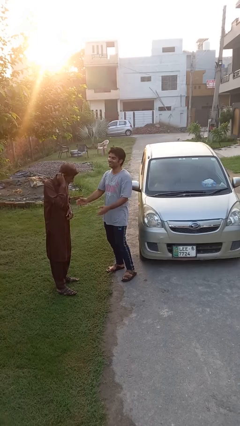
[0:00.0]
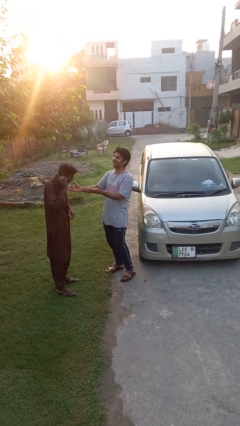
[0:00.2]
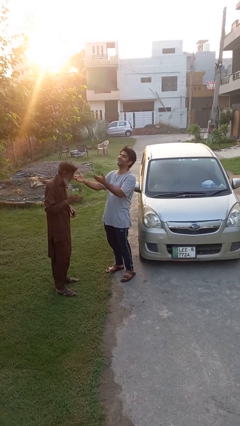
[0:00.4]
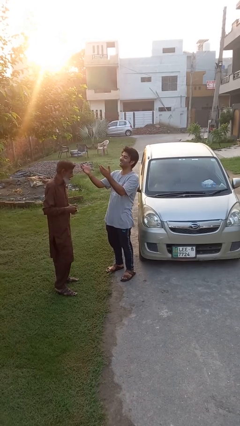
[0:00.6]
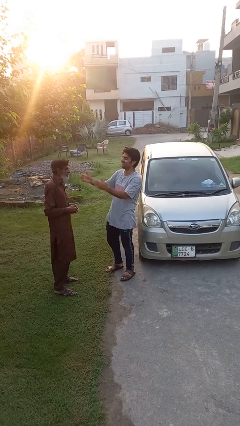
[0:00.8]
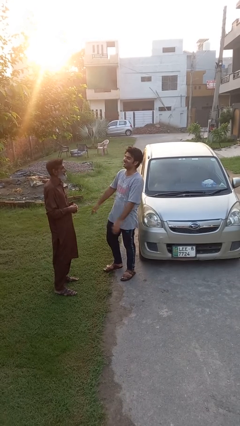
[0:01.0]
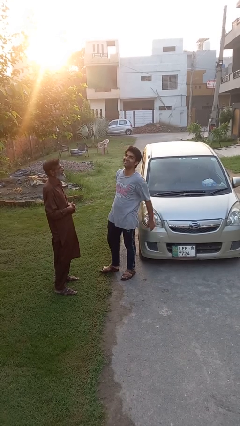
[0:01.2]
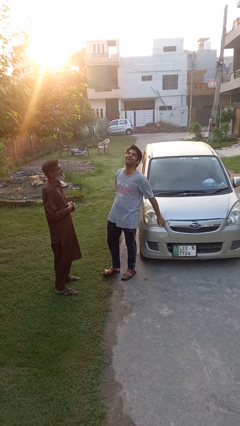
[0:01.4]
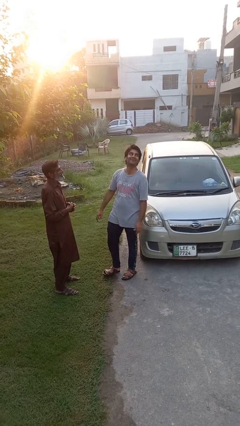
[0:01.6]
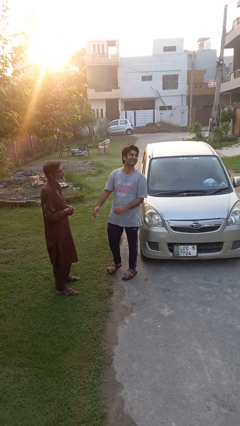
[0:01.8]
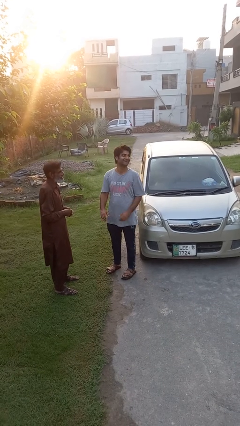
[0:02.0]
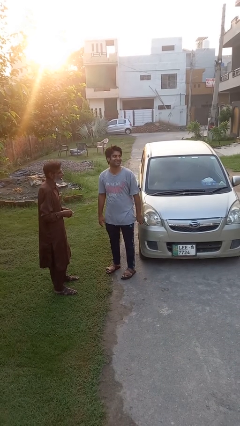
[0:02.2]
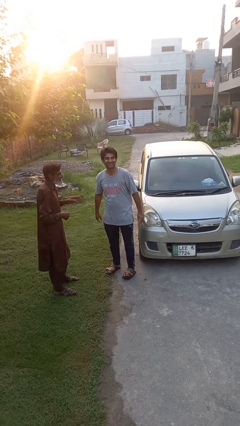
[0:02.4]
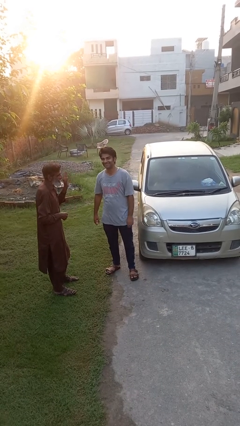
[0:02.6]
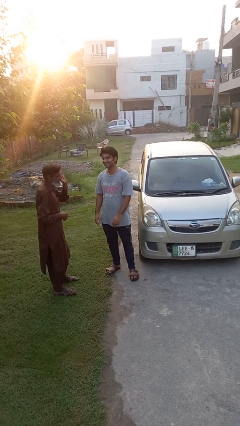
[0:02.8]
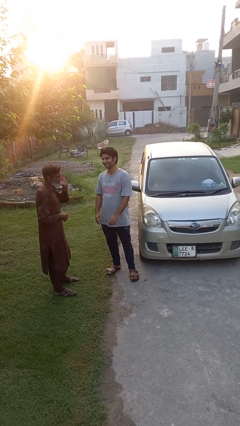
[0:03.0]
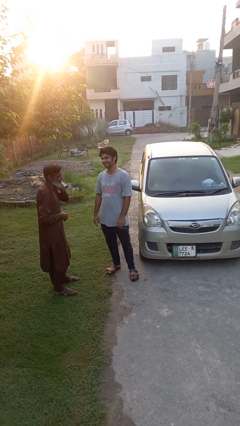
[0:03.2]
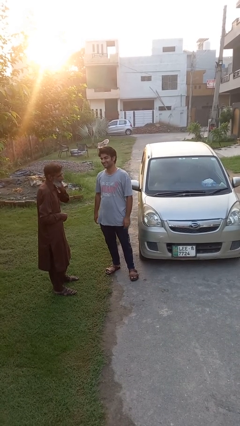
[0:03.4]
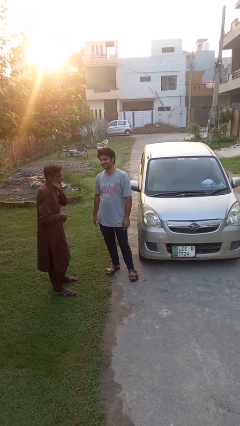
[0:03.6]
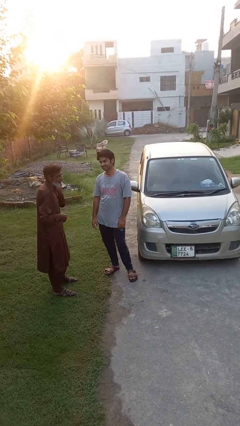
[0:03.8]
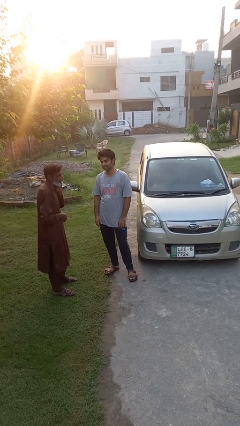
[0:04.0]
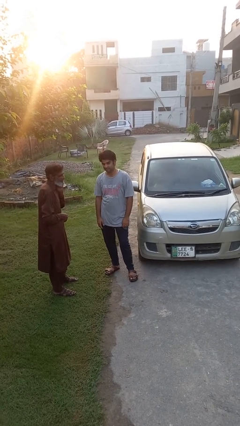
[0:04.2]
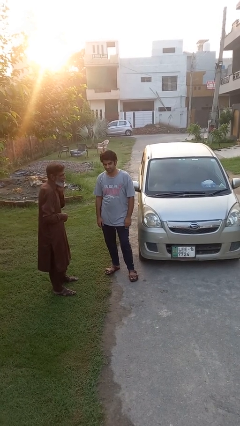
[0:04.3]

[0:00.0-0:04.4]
person laughs with person

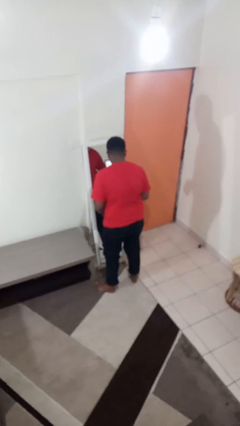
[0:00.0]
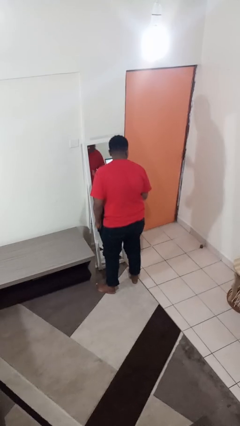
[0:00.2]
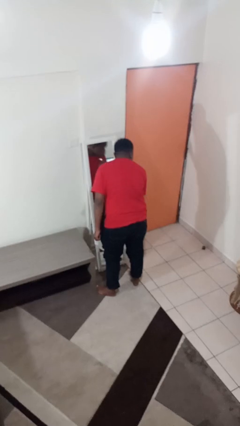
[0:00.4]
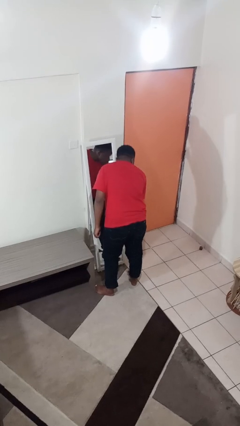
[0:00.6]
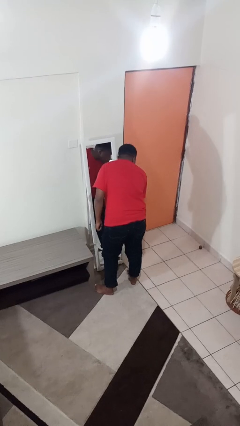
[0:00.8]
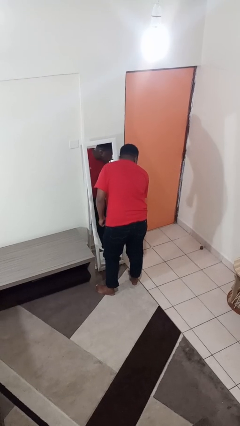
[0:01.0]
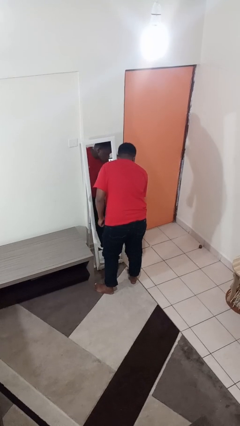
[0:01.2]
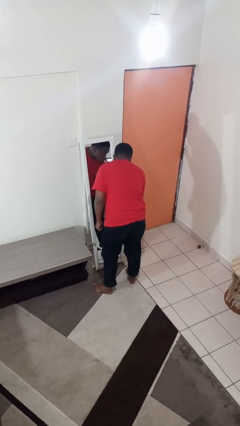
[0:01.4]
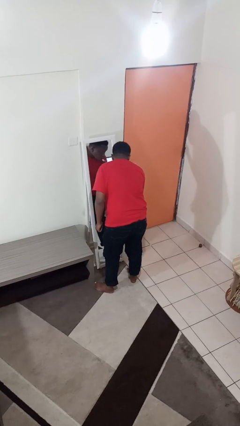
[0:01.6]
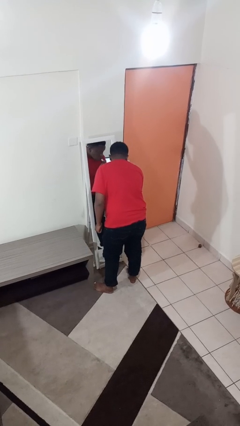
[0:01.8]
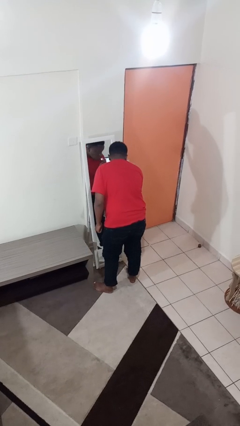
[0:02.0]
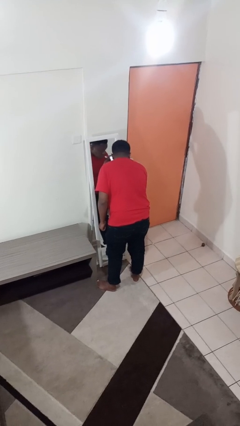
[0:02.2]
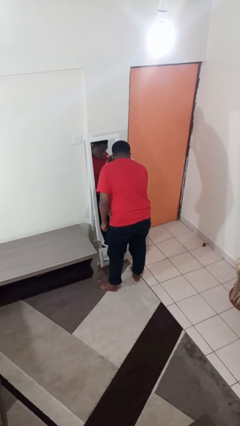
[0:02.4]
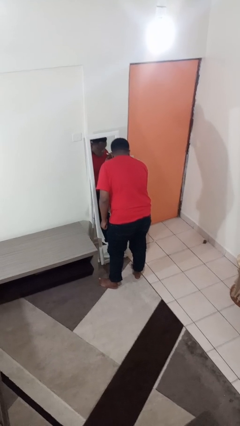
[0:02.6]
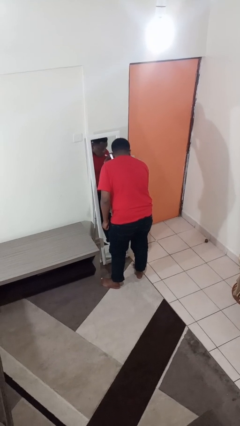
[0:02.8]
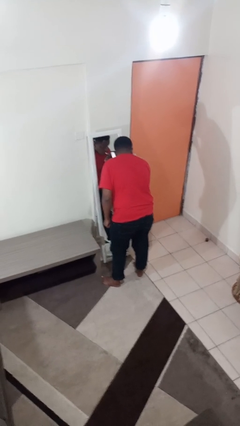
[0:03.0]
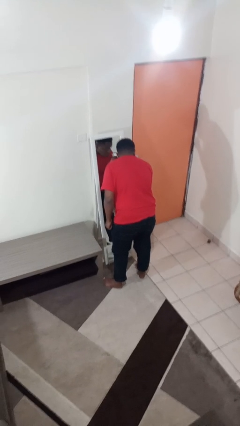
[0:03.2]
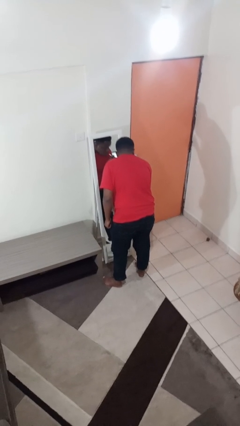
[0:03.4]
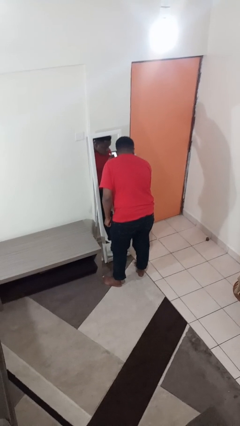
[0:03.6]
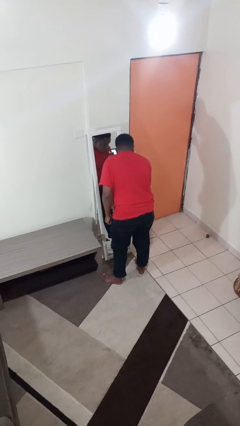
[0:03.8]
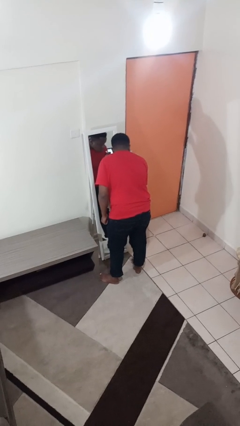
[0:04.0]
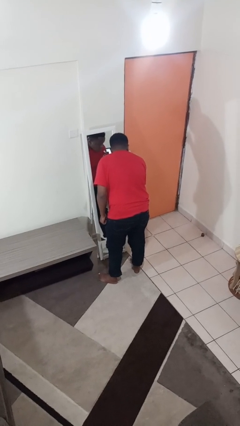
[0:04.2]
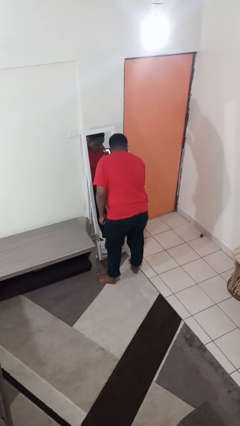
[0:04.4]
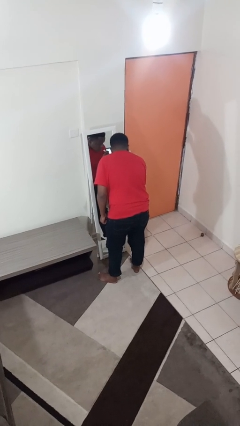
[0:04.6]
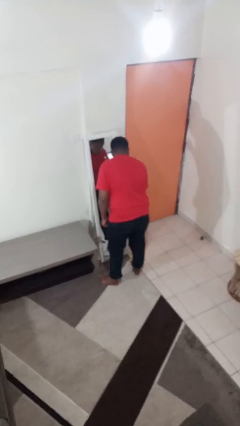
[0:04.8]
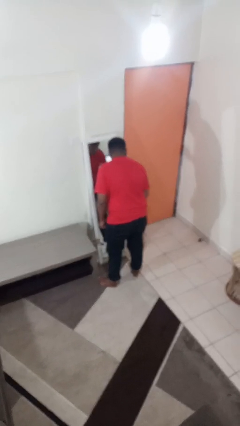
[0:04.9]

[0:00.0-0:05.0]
person applies lip makeup

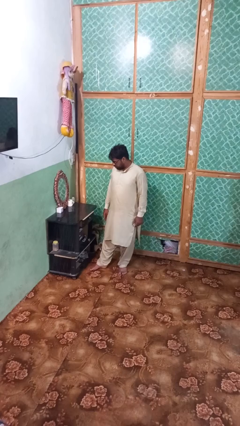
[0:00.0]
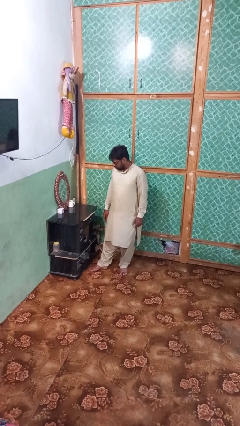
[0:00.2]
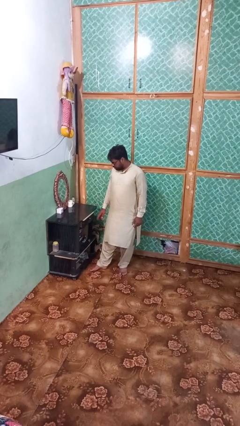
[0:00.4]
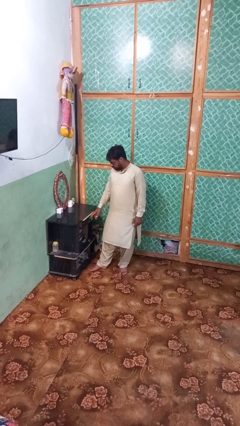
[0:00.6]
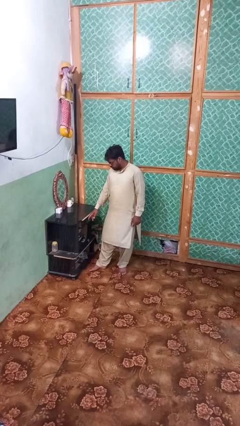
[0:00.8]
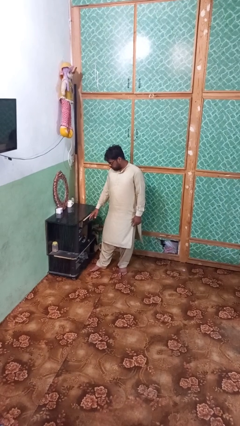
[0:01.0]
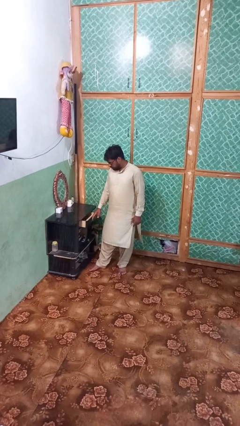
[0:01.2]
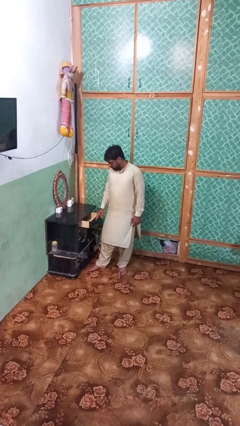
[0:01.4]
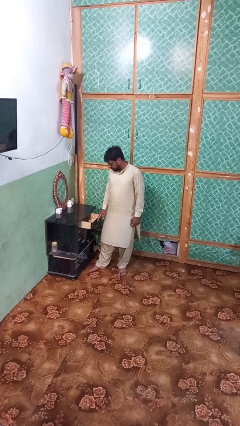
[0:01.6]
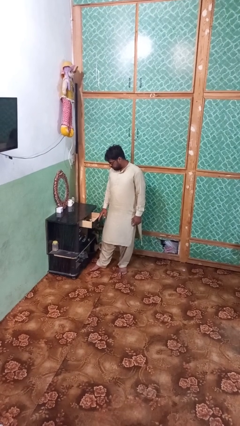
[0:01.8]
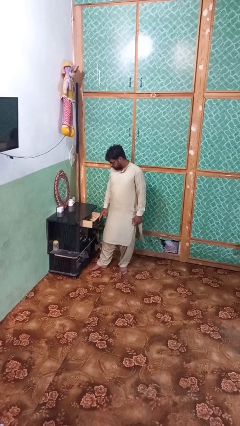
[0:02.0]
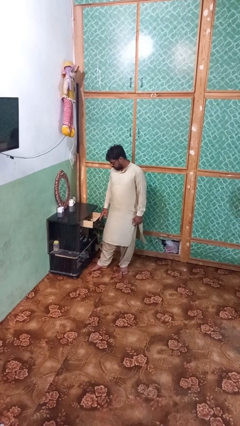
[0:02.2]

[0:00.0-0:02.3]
person opens dresser drawer

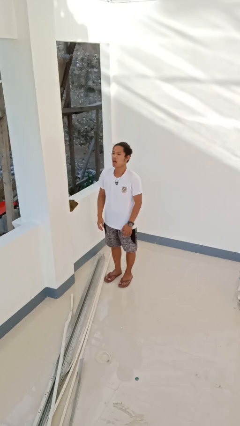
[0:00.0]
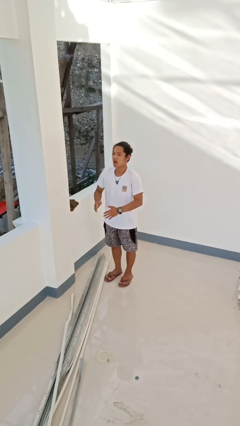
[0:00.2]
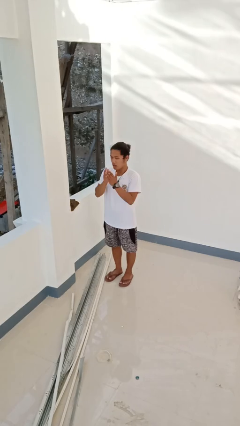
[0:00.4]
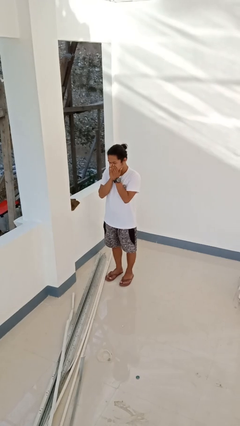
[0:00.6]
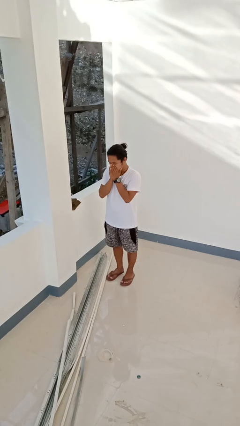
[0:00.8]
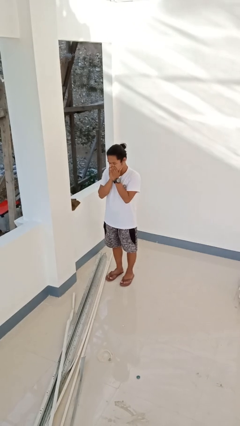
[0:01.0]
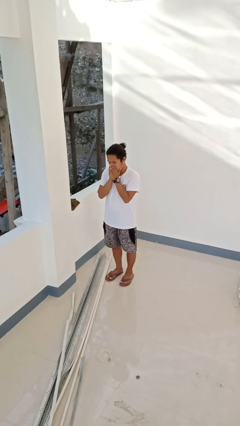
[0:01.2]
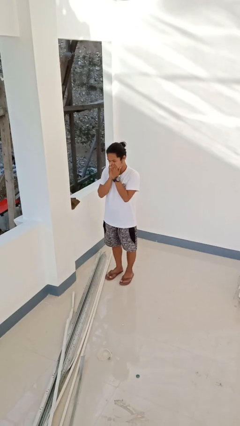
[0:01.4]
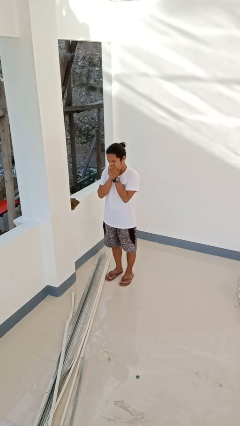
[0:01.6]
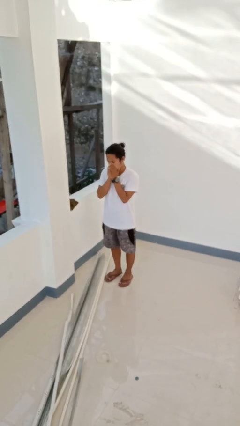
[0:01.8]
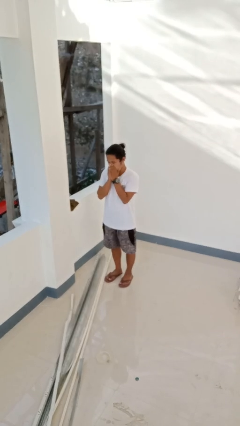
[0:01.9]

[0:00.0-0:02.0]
person sneezes into hand

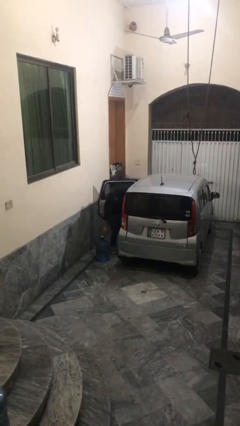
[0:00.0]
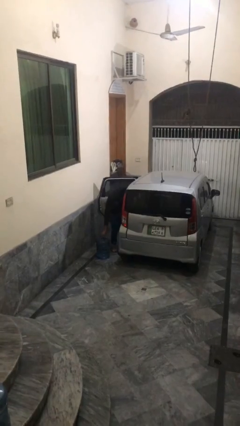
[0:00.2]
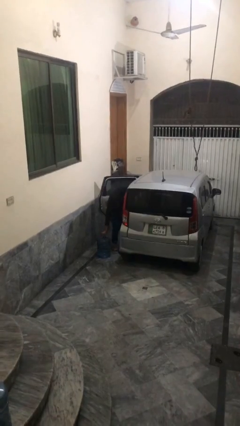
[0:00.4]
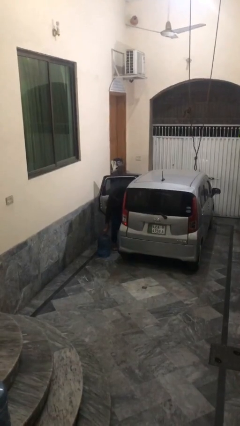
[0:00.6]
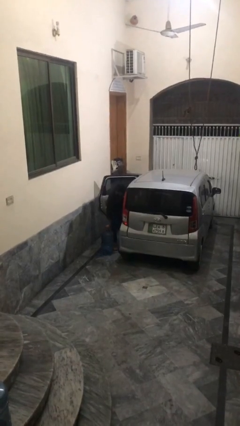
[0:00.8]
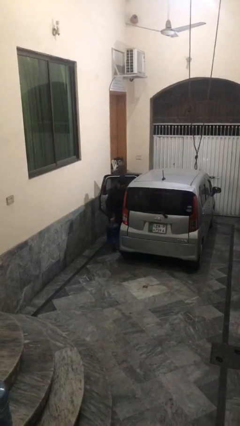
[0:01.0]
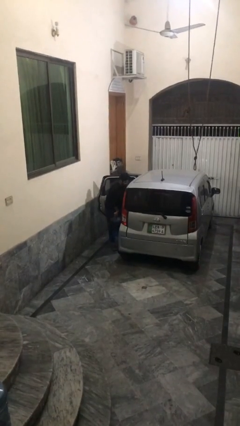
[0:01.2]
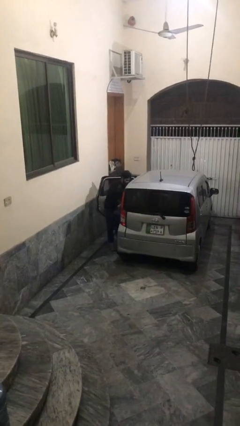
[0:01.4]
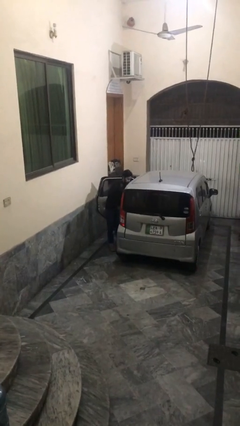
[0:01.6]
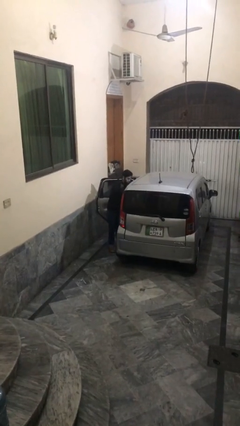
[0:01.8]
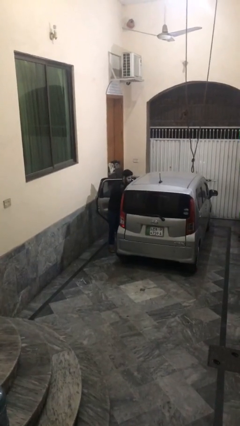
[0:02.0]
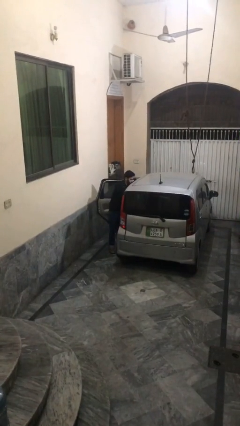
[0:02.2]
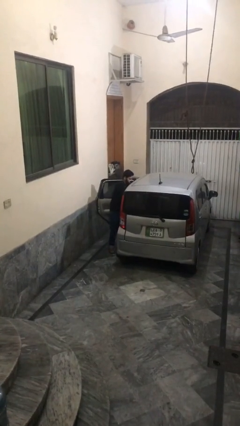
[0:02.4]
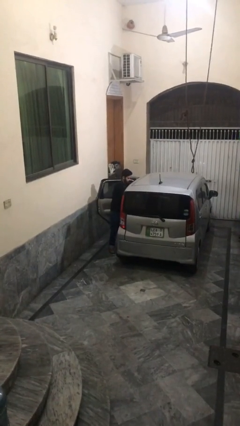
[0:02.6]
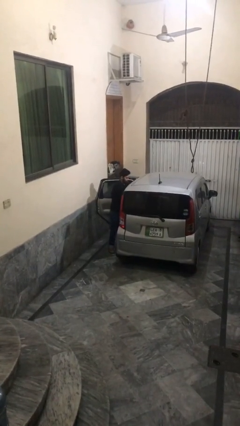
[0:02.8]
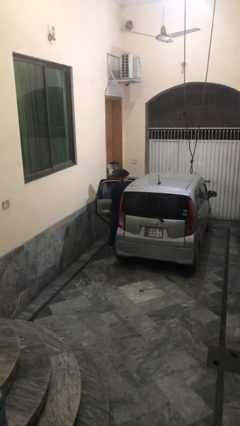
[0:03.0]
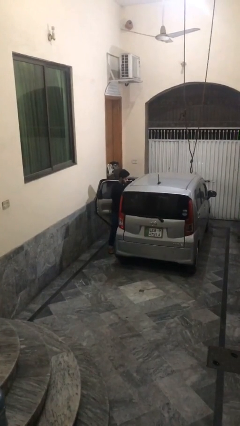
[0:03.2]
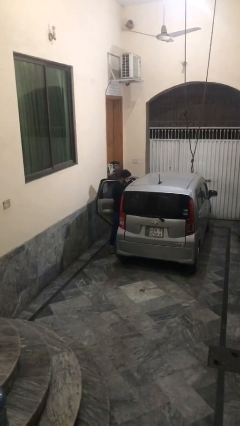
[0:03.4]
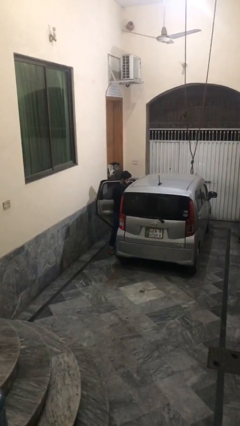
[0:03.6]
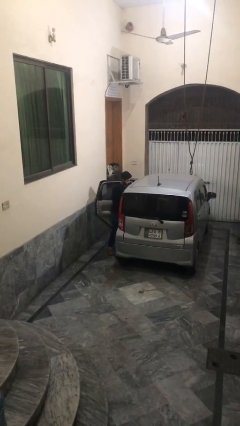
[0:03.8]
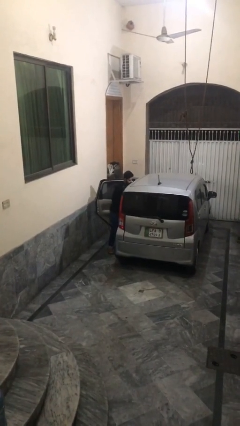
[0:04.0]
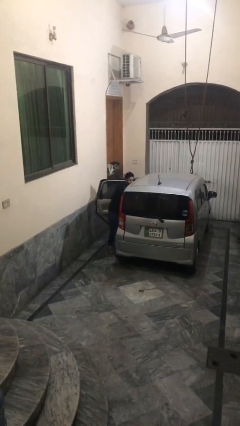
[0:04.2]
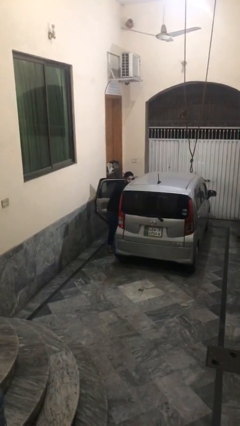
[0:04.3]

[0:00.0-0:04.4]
person loads car
